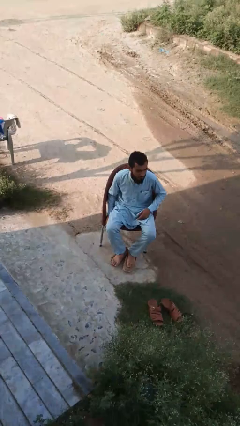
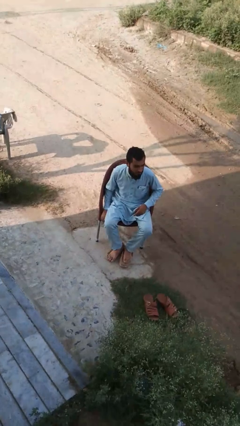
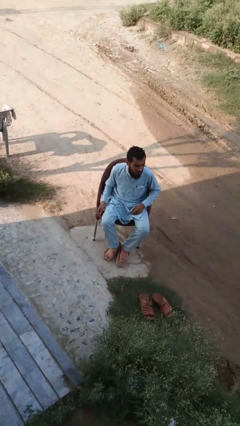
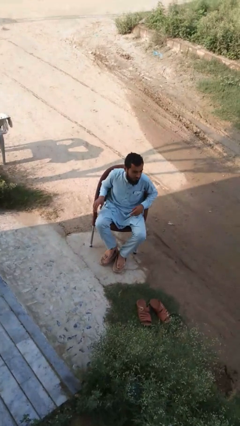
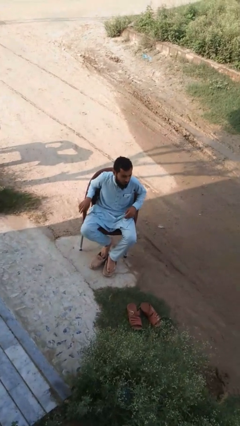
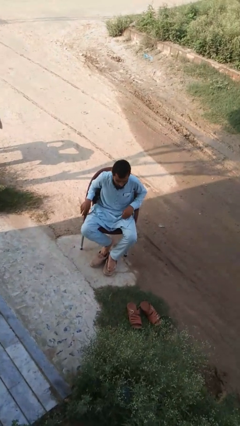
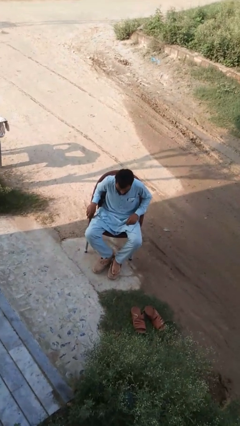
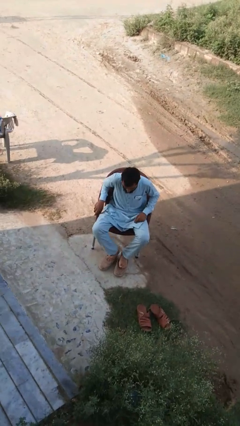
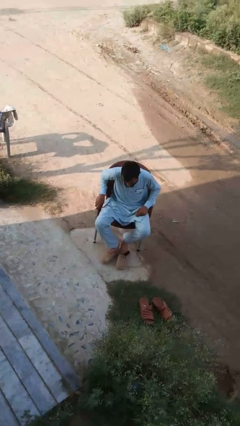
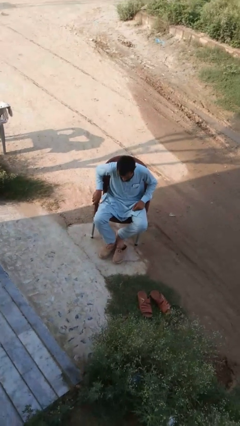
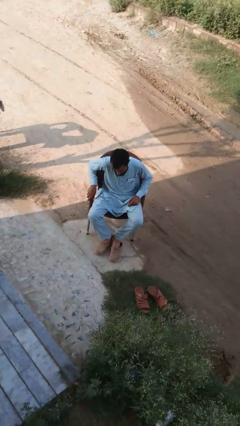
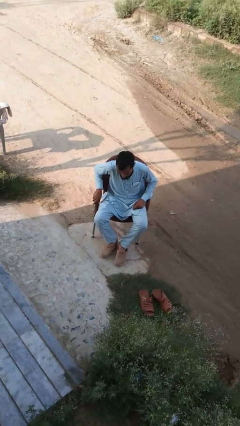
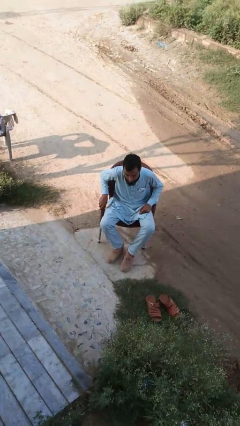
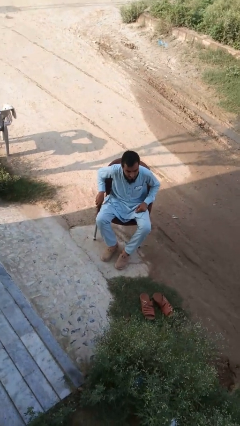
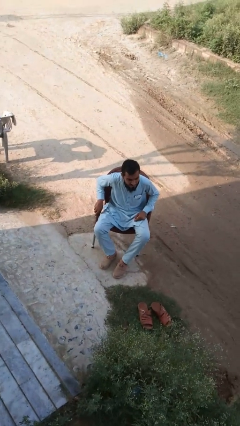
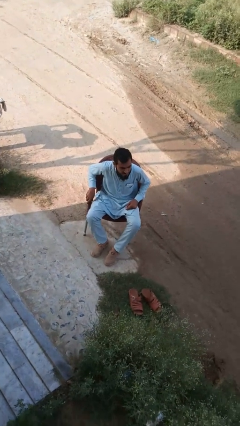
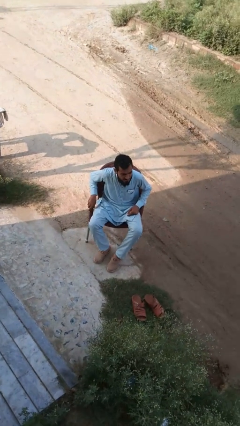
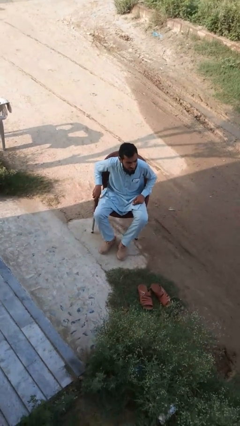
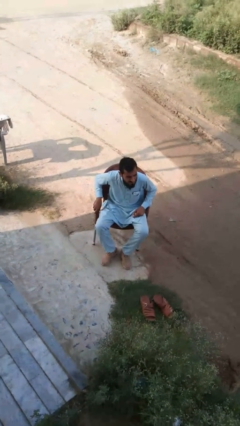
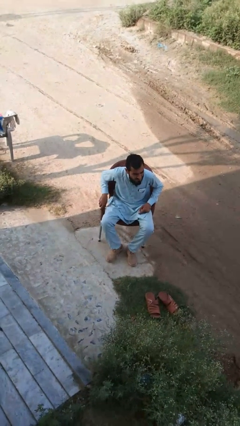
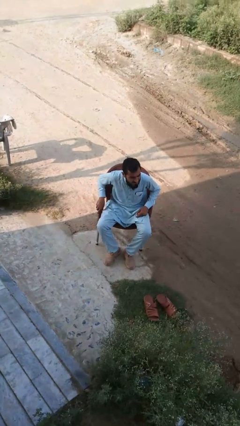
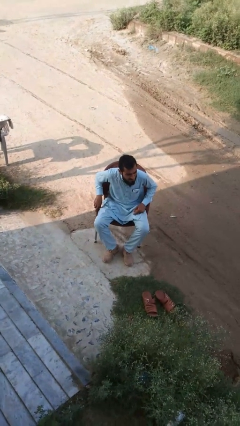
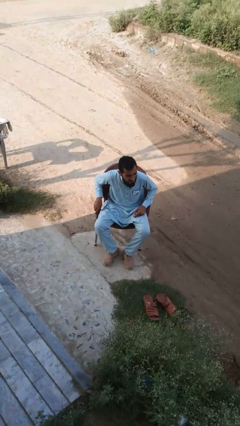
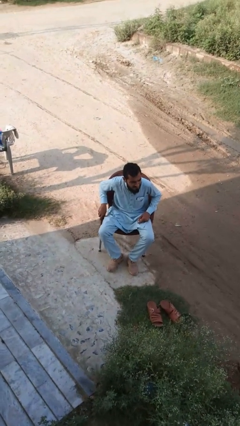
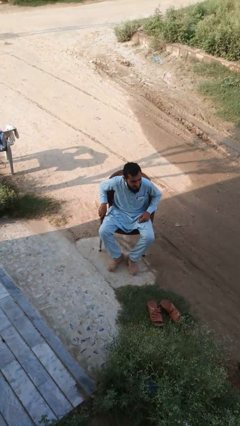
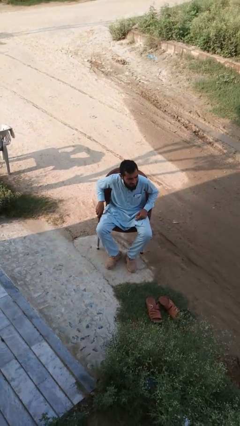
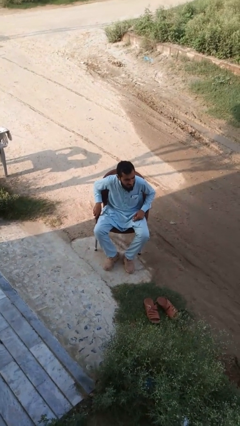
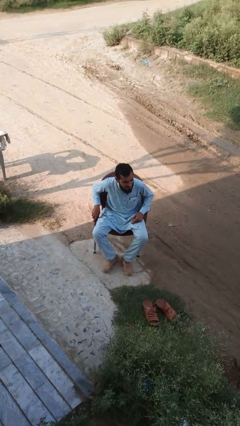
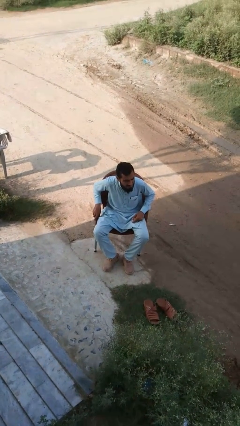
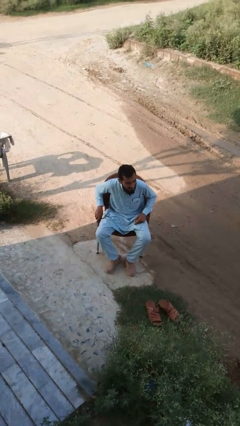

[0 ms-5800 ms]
person puts on shoes

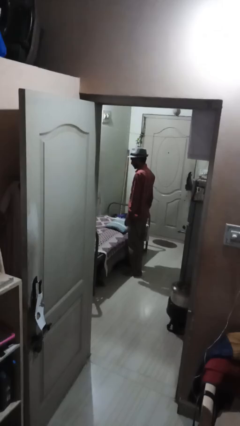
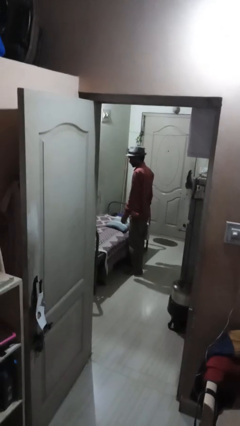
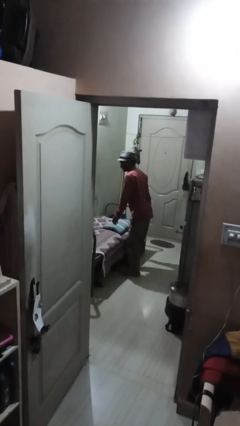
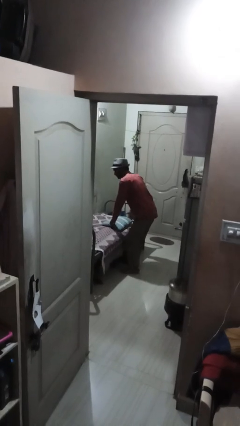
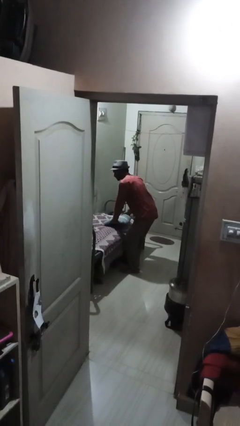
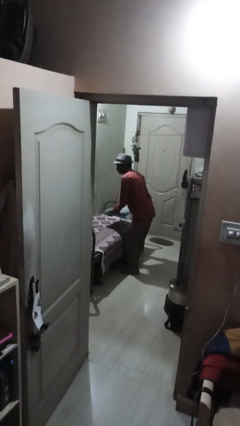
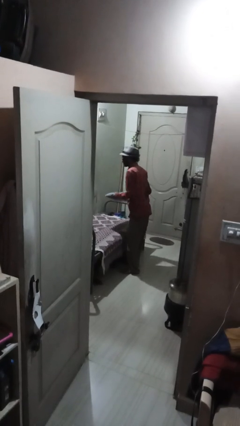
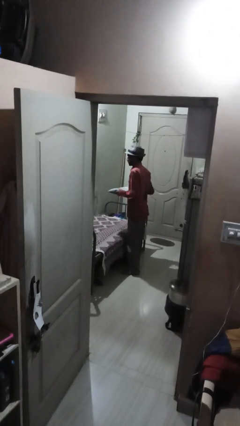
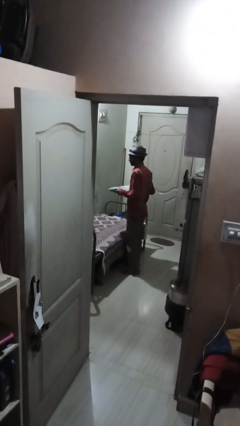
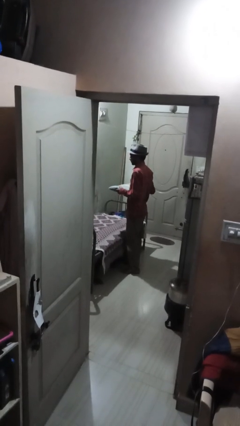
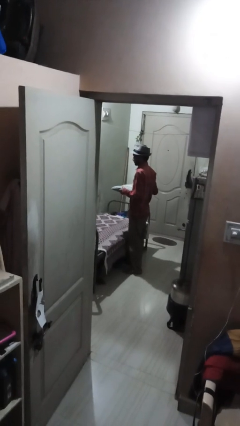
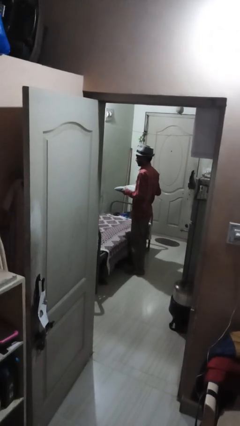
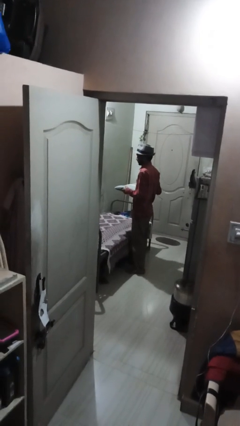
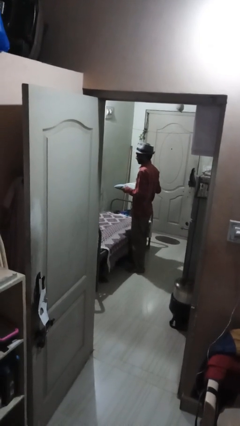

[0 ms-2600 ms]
person picks up object from bed

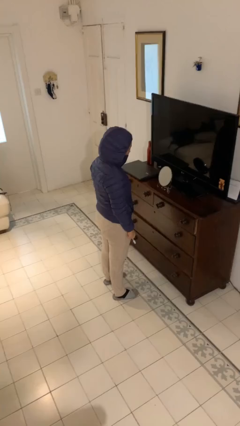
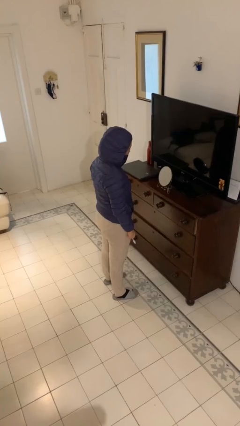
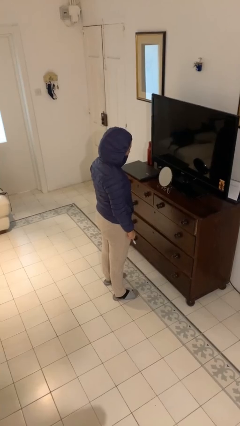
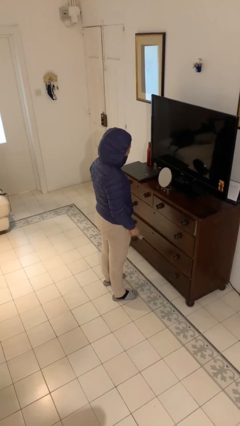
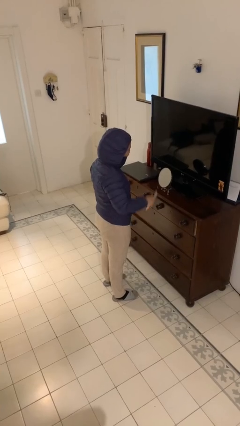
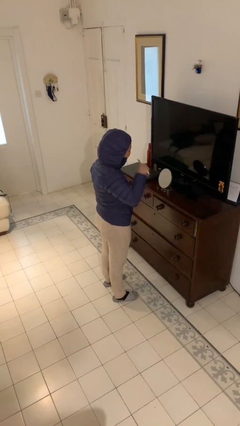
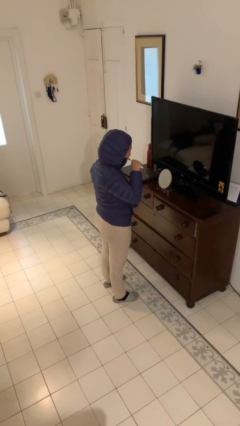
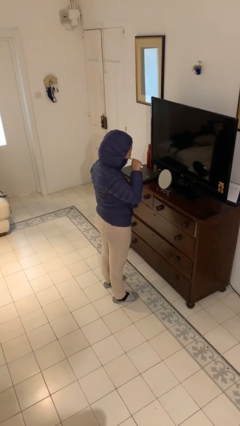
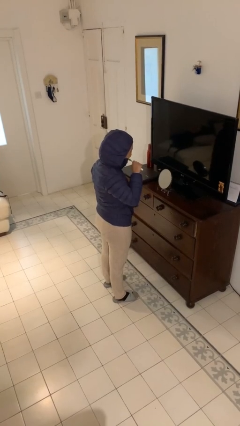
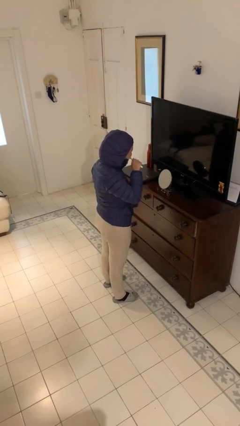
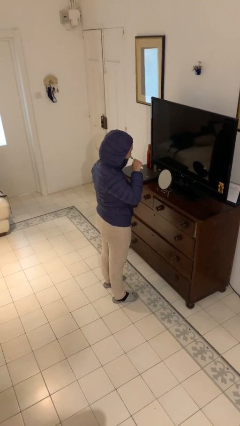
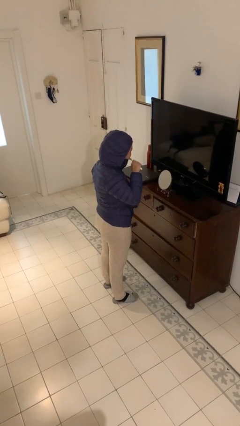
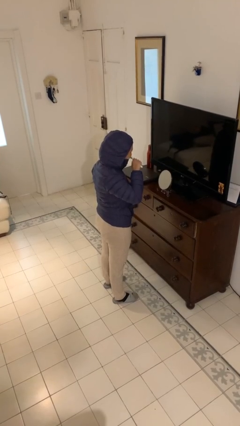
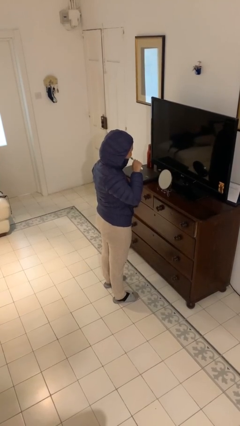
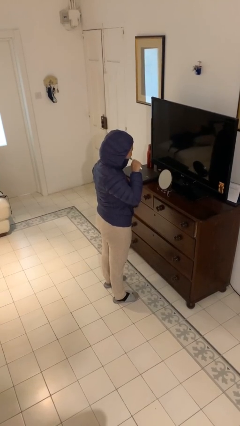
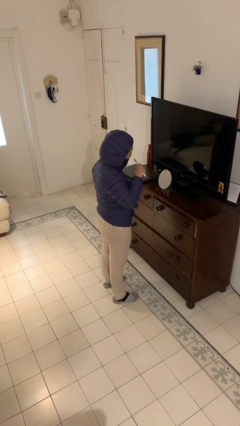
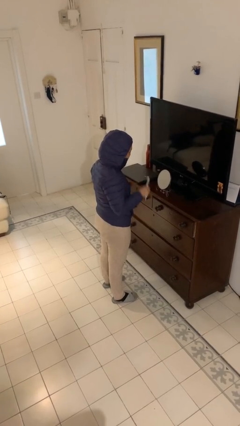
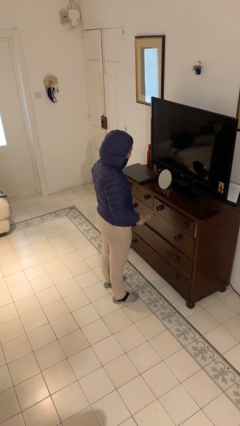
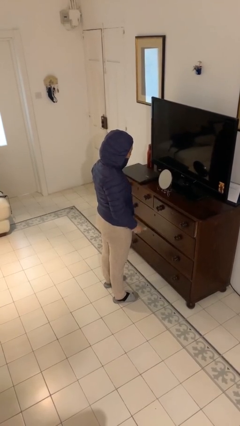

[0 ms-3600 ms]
person brushes teeth

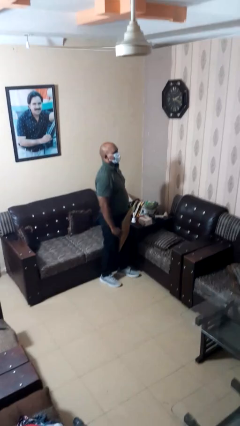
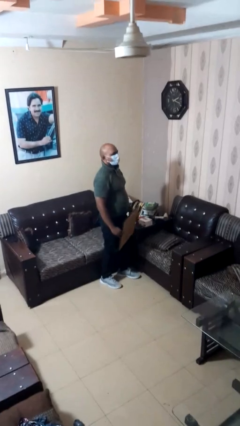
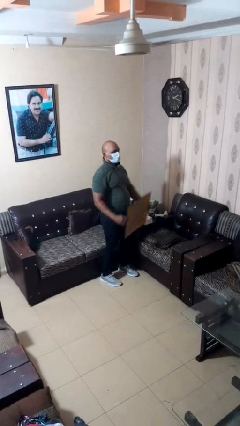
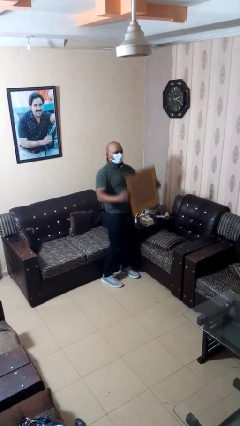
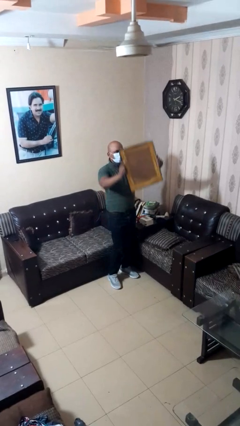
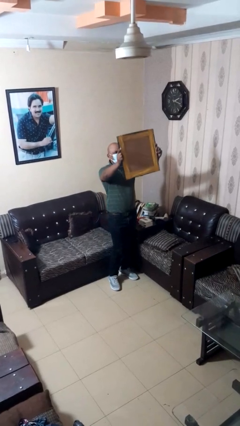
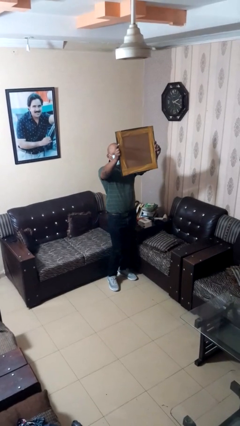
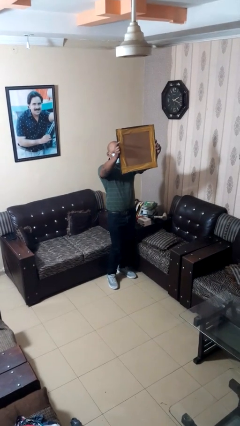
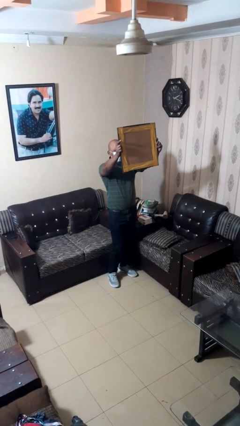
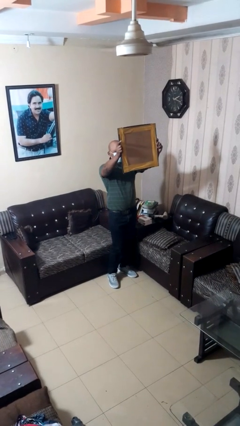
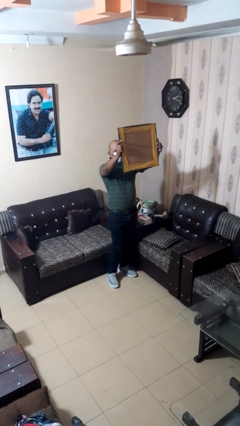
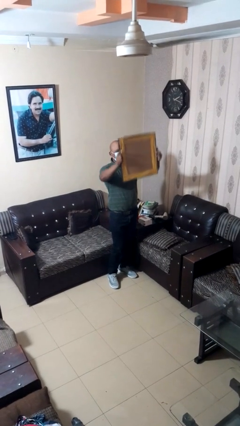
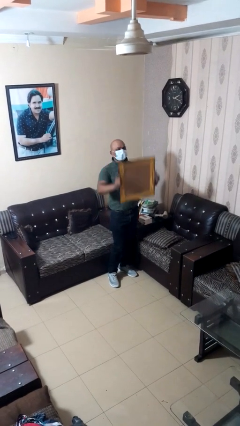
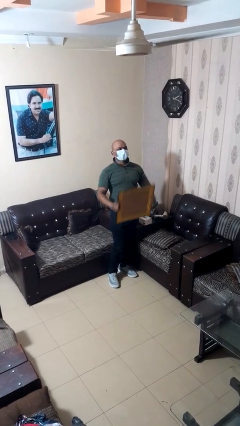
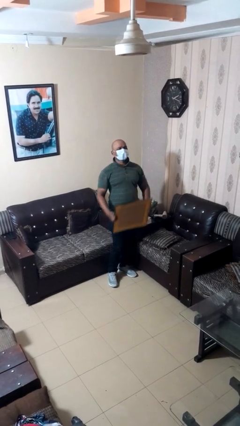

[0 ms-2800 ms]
person holds object above head

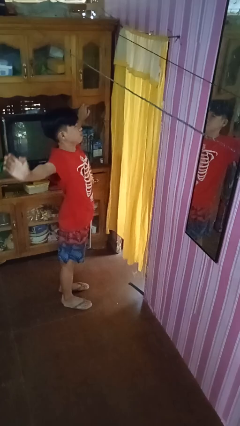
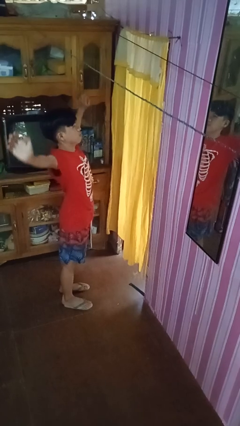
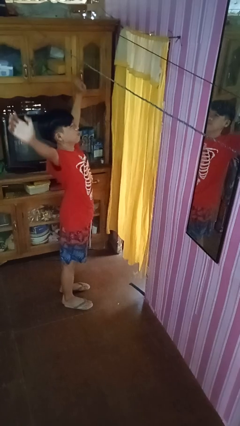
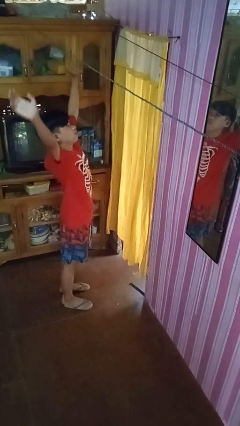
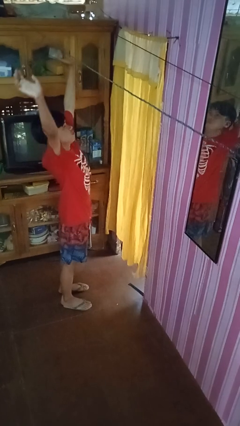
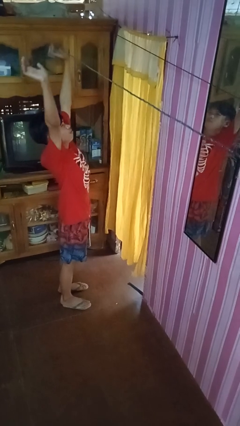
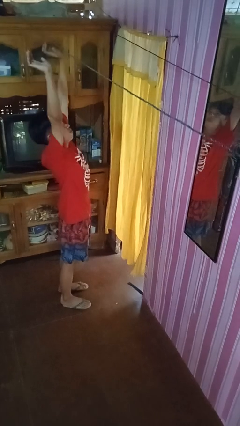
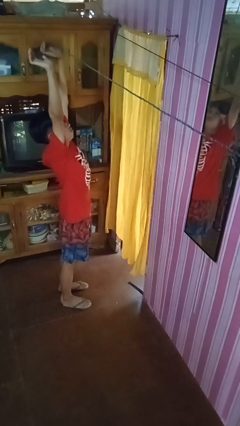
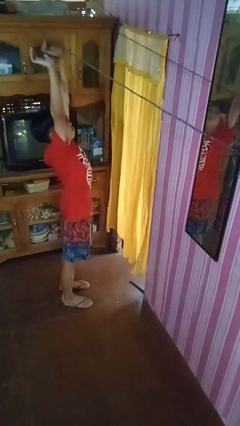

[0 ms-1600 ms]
person stretches arms over head

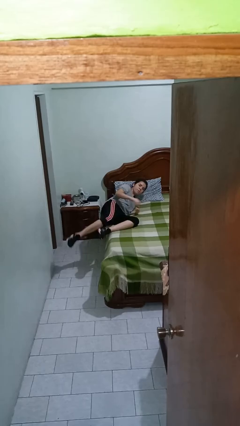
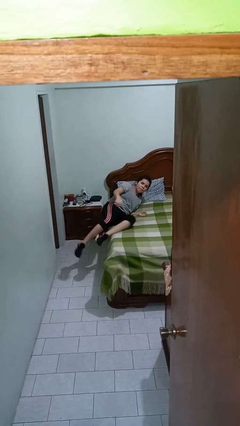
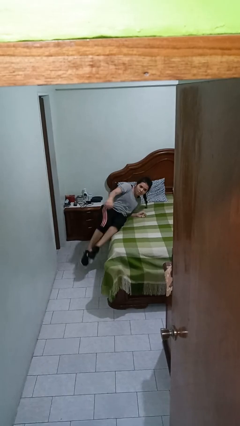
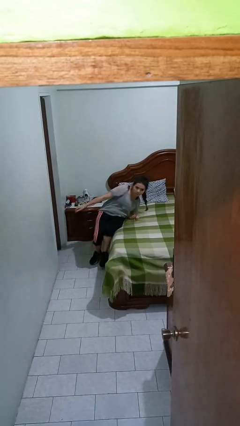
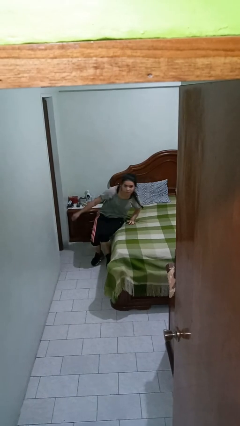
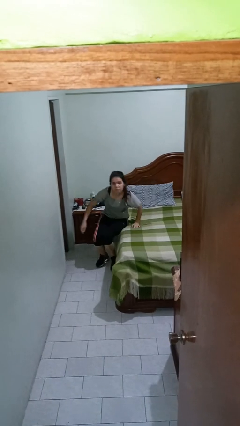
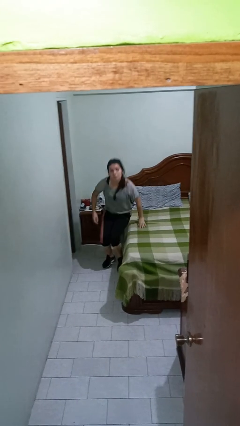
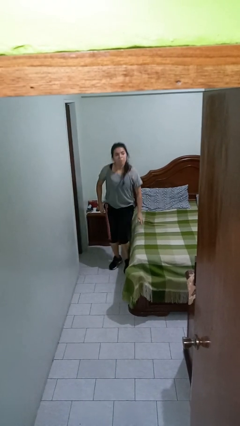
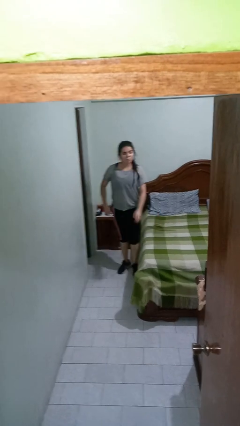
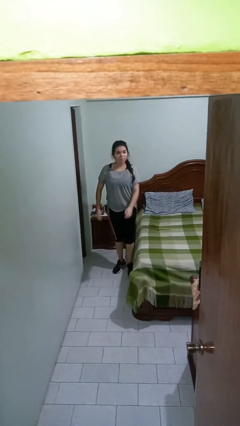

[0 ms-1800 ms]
person stands up
